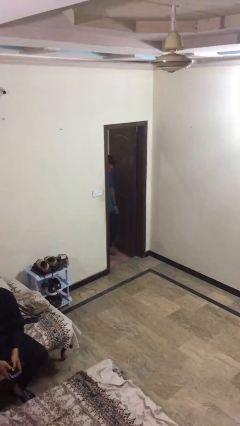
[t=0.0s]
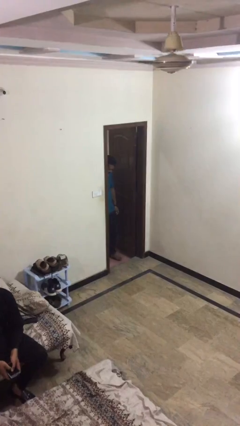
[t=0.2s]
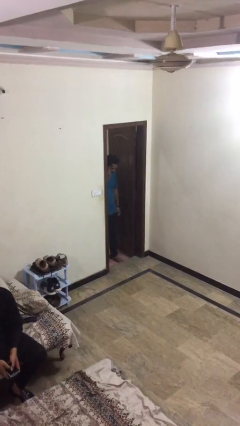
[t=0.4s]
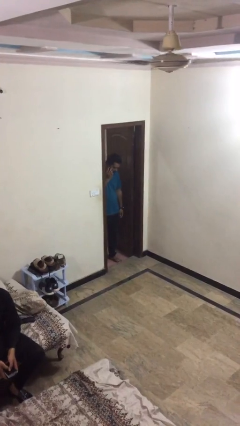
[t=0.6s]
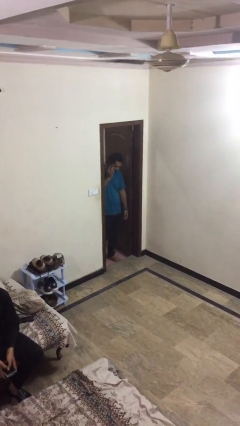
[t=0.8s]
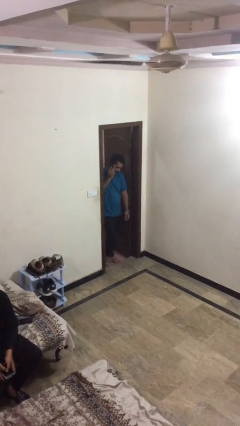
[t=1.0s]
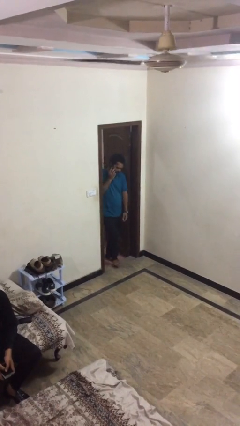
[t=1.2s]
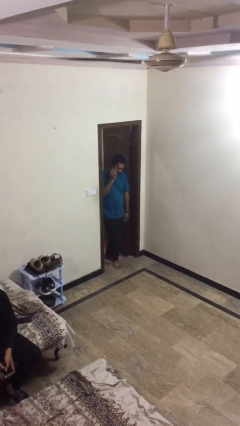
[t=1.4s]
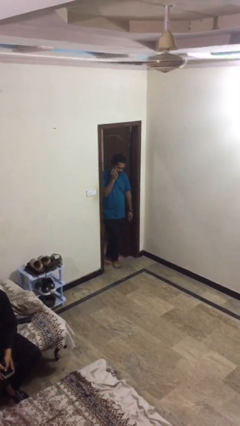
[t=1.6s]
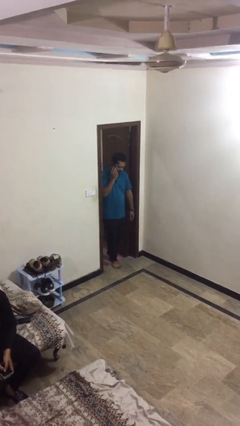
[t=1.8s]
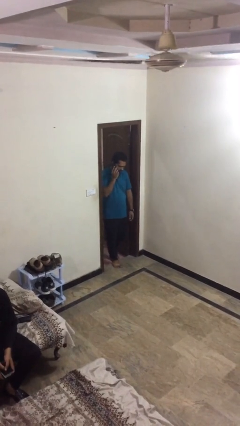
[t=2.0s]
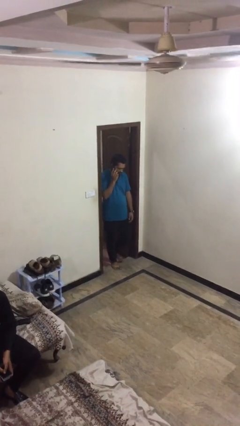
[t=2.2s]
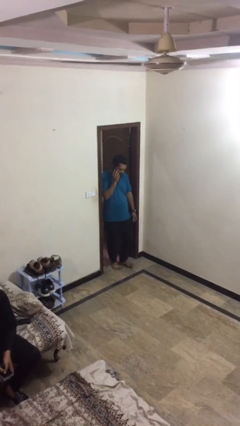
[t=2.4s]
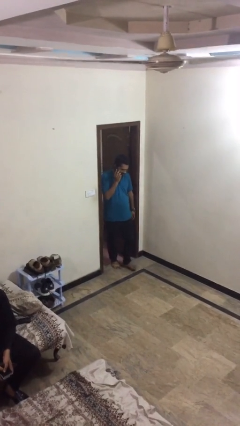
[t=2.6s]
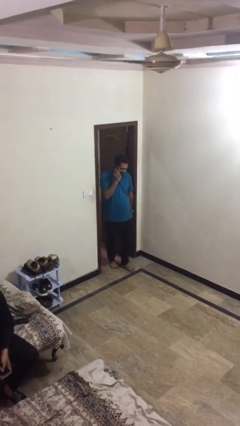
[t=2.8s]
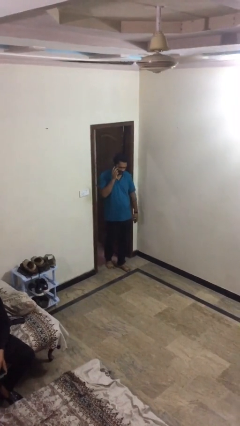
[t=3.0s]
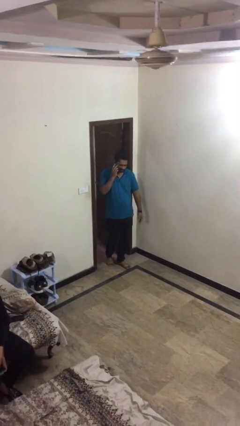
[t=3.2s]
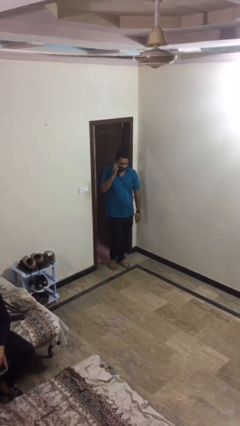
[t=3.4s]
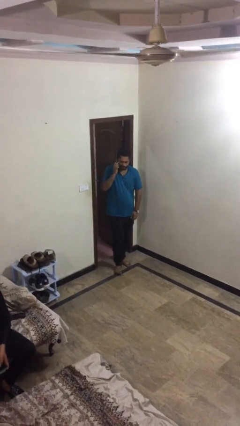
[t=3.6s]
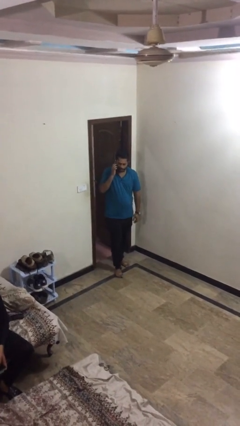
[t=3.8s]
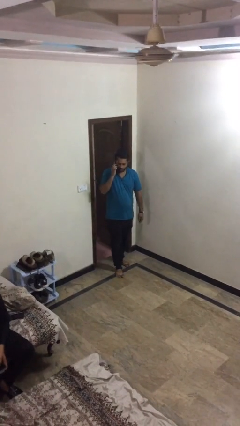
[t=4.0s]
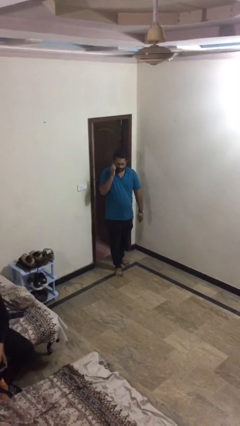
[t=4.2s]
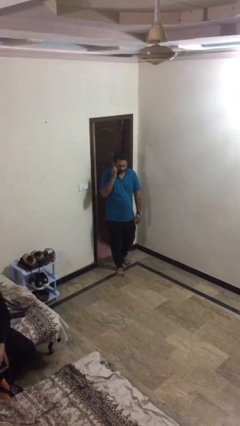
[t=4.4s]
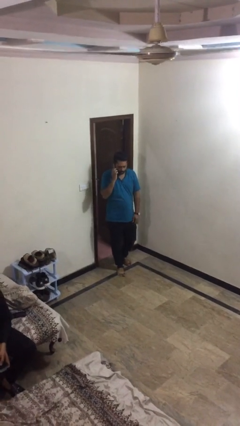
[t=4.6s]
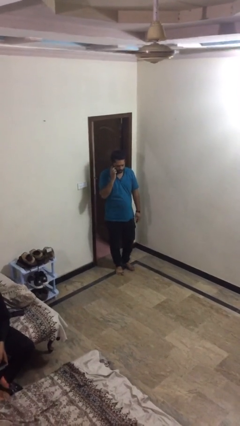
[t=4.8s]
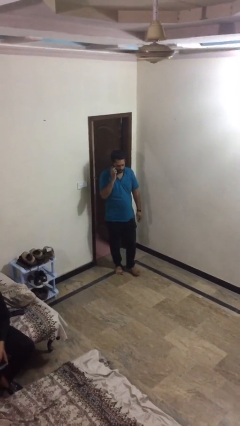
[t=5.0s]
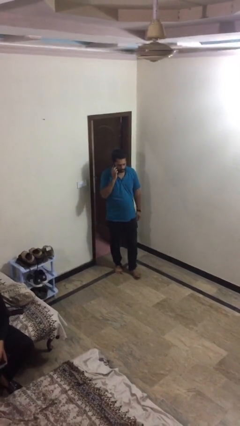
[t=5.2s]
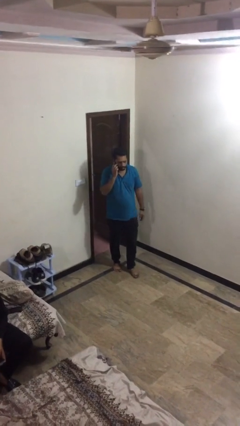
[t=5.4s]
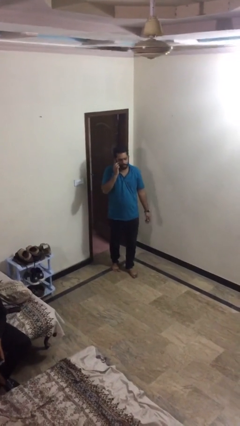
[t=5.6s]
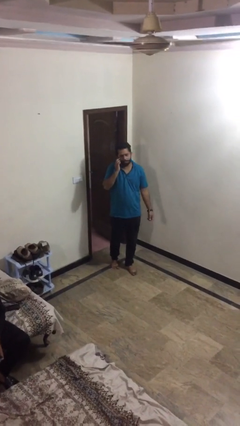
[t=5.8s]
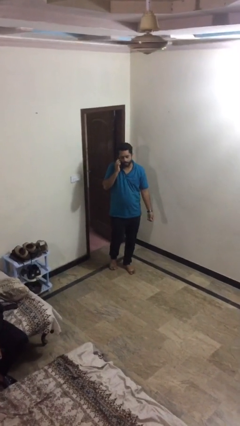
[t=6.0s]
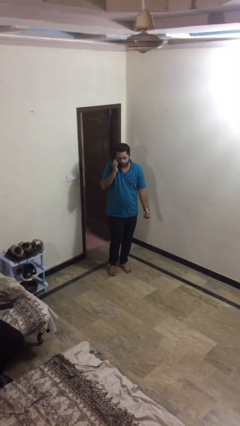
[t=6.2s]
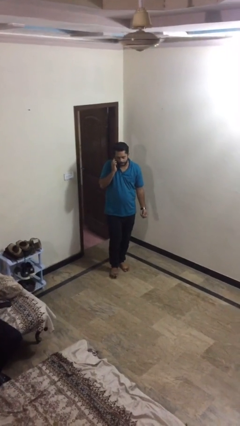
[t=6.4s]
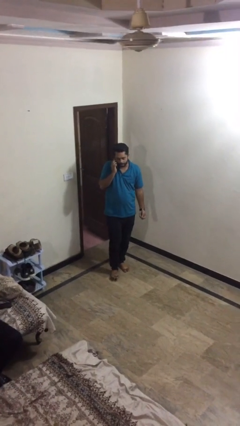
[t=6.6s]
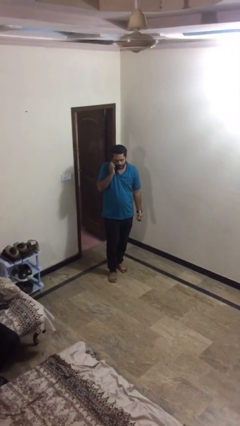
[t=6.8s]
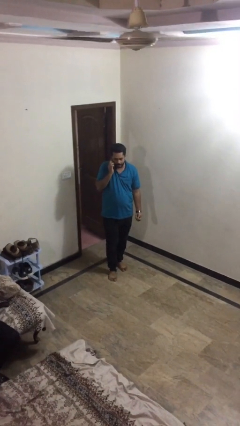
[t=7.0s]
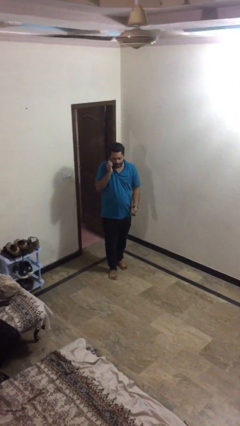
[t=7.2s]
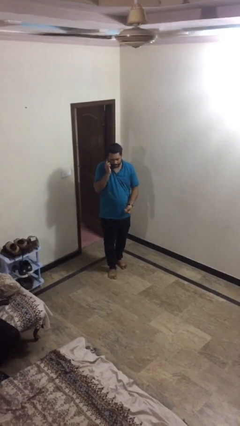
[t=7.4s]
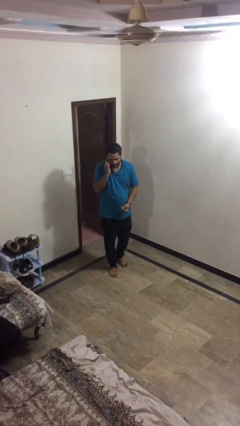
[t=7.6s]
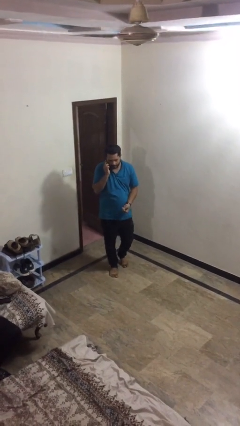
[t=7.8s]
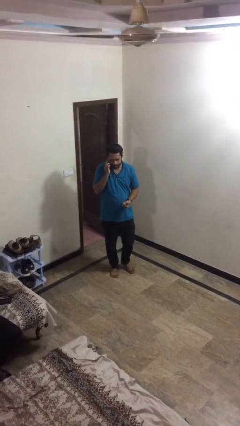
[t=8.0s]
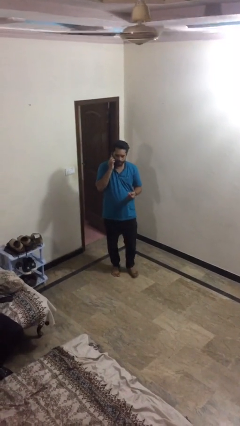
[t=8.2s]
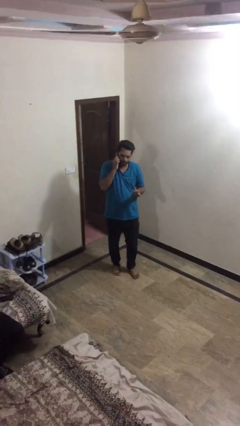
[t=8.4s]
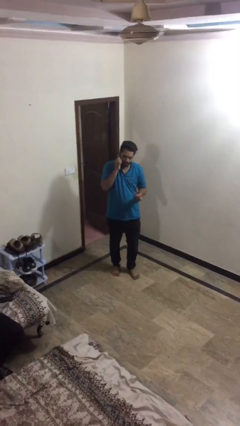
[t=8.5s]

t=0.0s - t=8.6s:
person enters scene through structure

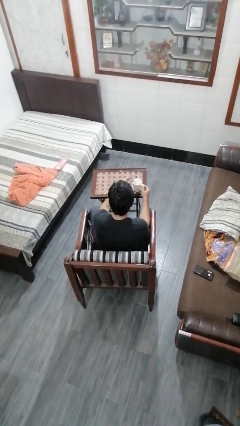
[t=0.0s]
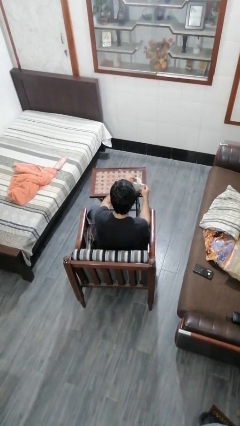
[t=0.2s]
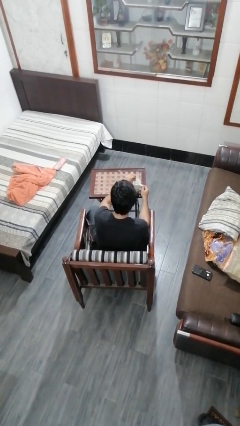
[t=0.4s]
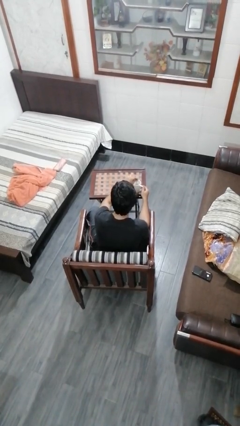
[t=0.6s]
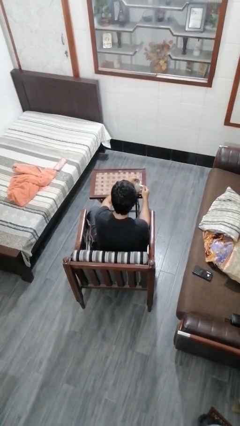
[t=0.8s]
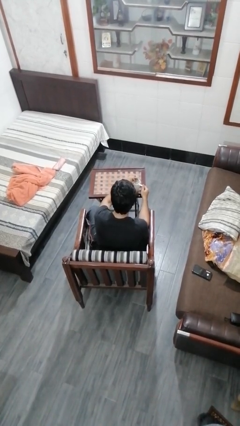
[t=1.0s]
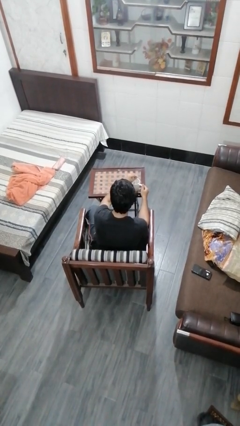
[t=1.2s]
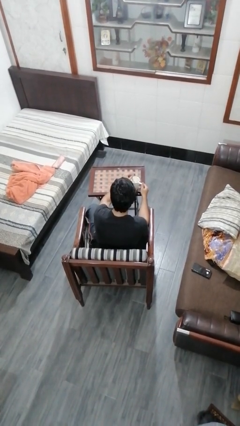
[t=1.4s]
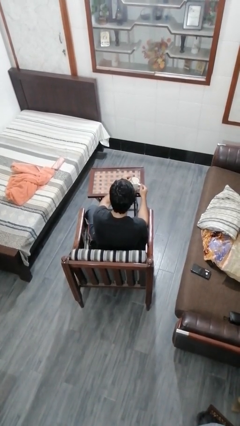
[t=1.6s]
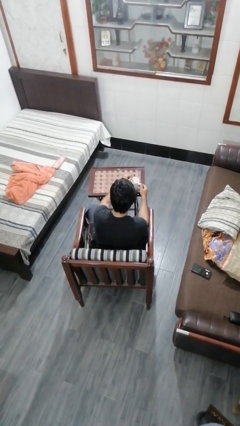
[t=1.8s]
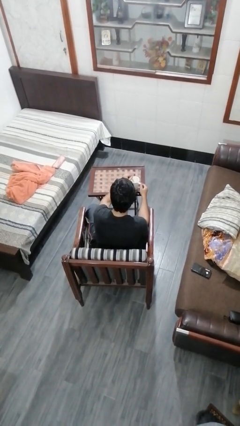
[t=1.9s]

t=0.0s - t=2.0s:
person stirs mug

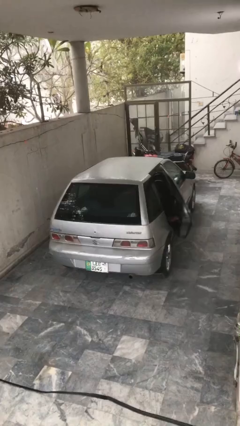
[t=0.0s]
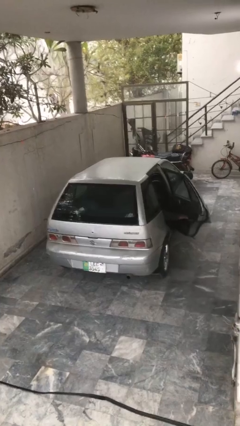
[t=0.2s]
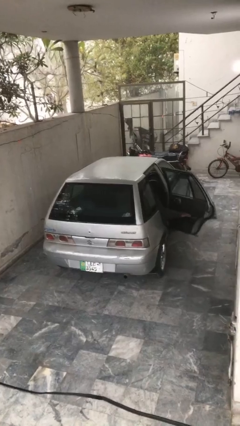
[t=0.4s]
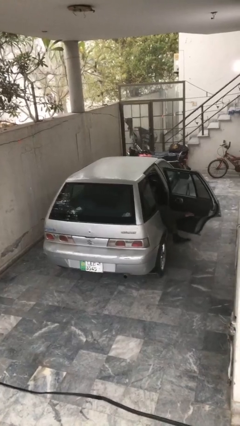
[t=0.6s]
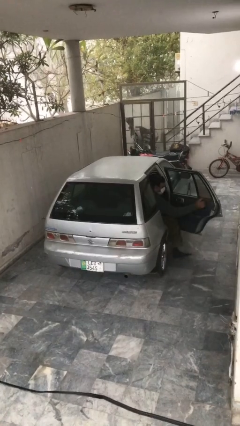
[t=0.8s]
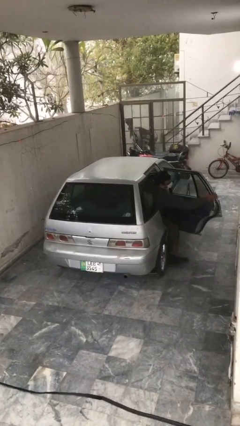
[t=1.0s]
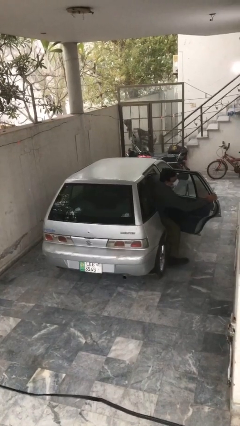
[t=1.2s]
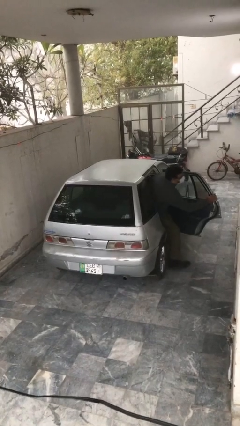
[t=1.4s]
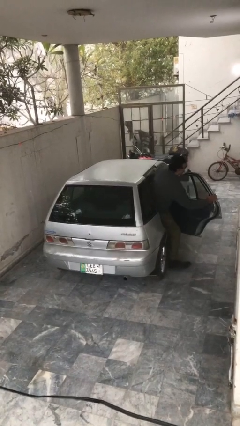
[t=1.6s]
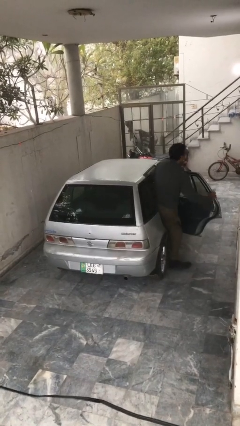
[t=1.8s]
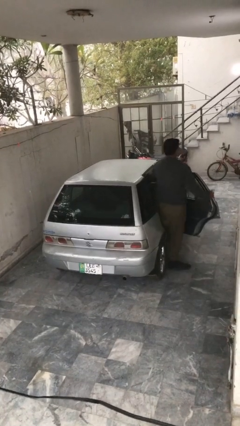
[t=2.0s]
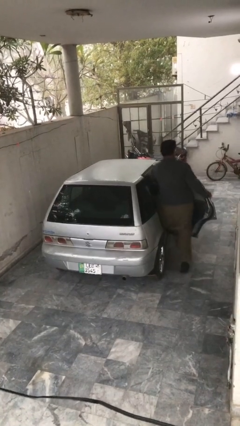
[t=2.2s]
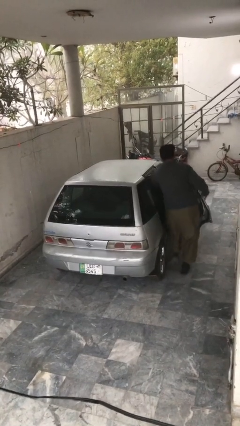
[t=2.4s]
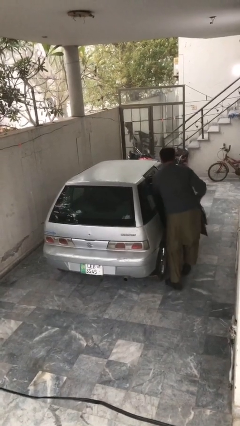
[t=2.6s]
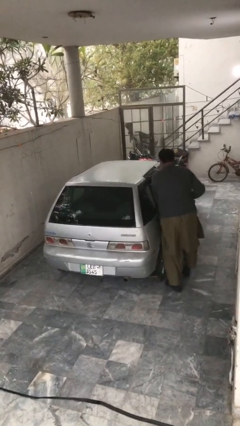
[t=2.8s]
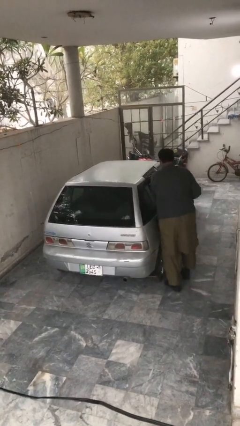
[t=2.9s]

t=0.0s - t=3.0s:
car drops off person

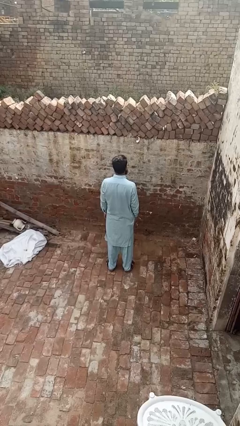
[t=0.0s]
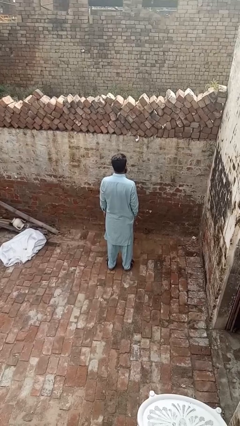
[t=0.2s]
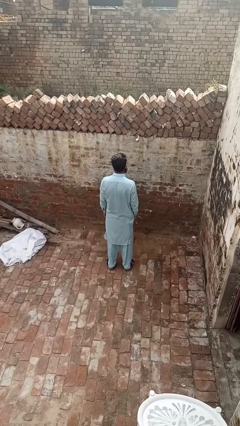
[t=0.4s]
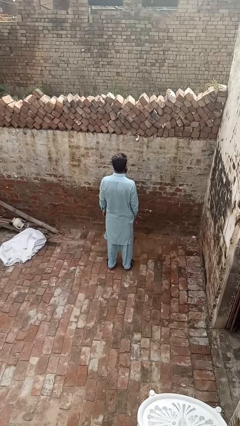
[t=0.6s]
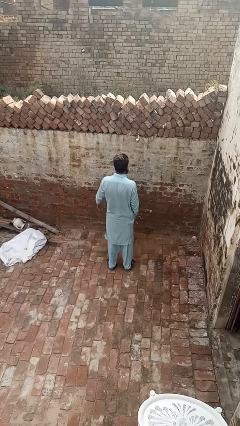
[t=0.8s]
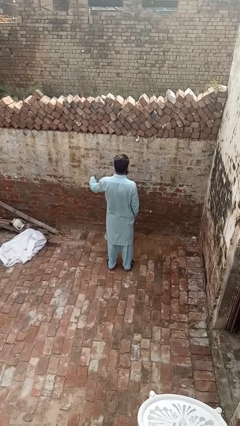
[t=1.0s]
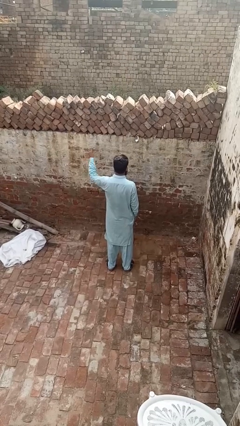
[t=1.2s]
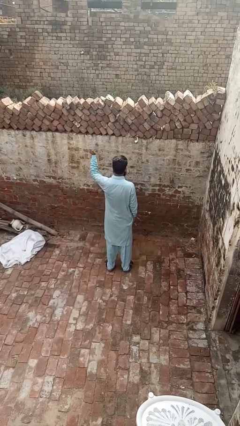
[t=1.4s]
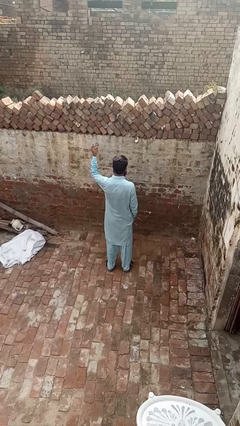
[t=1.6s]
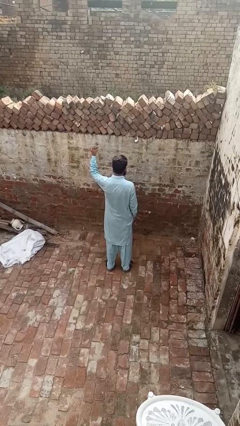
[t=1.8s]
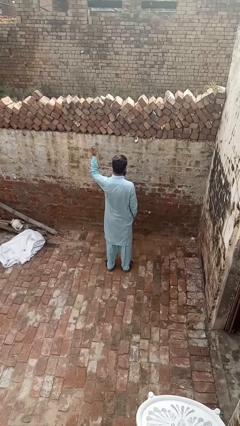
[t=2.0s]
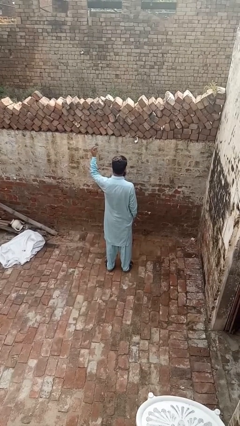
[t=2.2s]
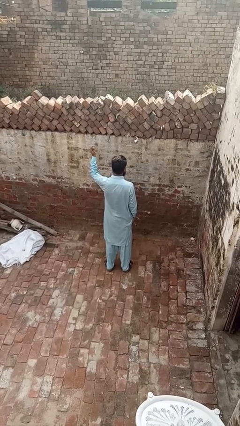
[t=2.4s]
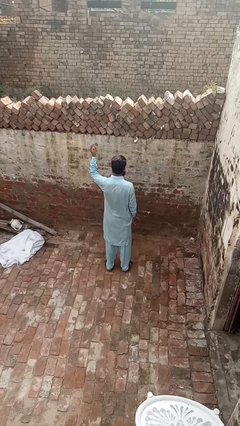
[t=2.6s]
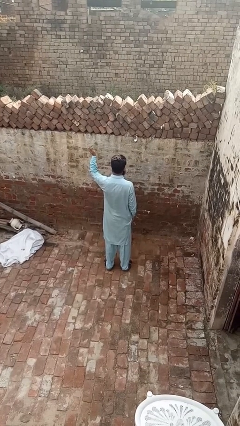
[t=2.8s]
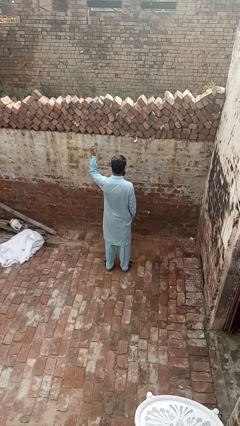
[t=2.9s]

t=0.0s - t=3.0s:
person snaps fingers

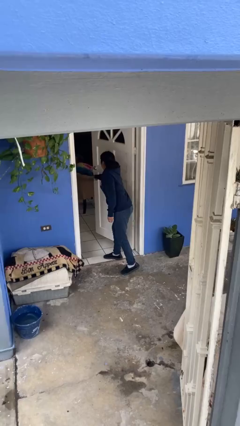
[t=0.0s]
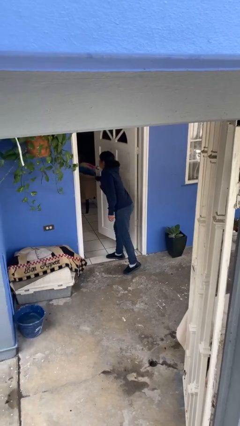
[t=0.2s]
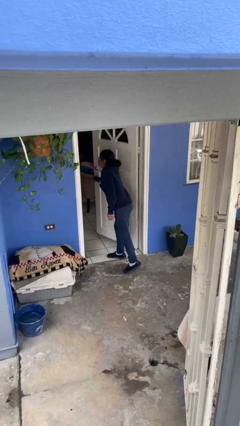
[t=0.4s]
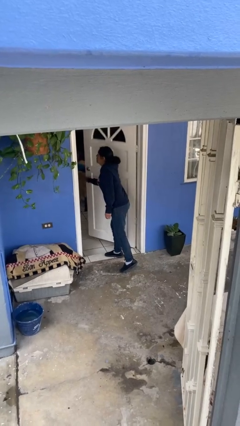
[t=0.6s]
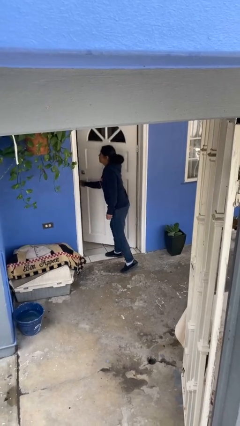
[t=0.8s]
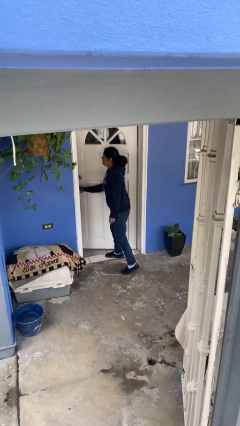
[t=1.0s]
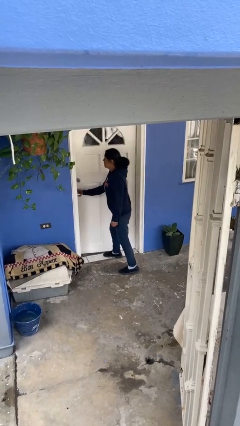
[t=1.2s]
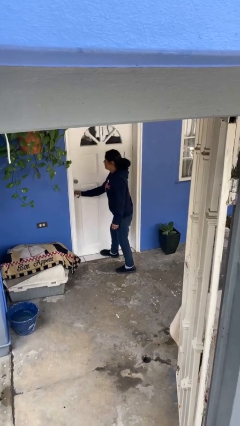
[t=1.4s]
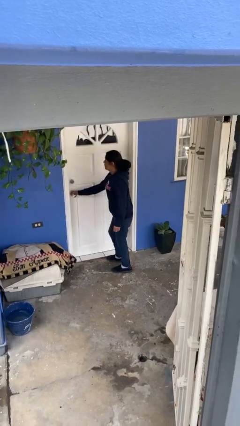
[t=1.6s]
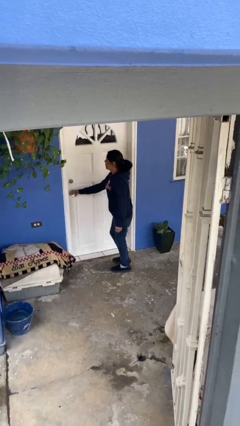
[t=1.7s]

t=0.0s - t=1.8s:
person closes facility door
